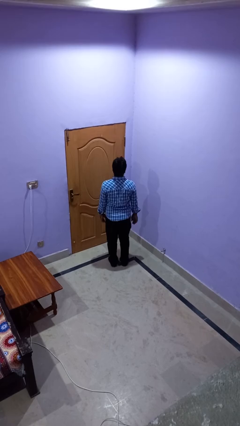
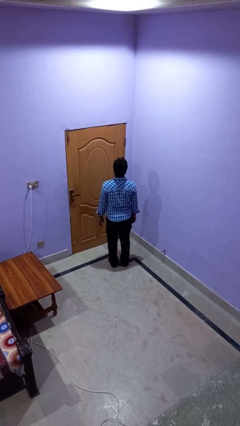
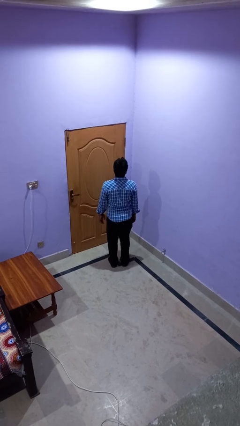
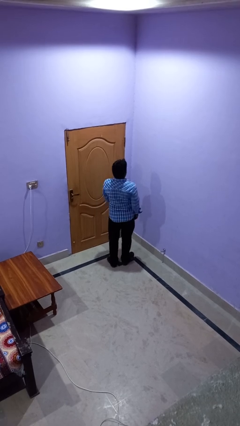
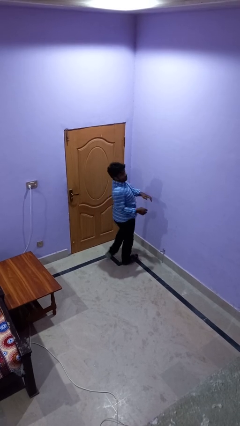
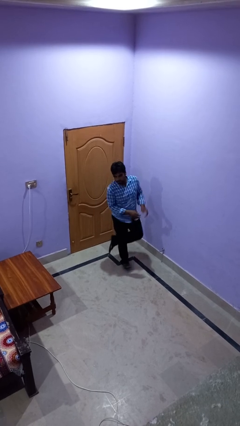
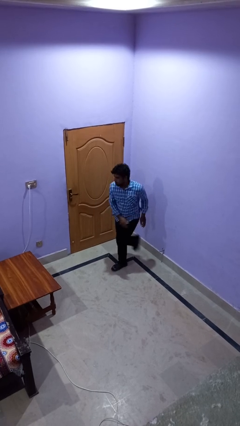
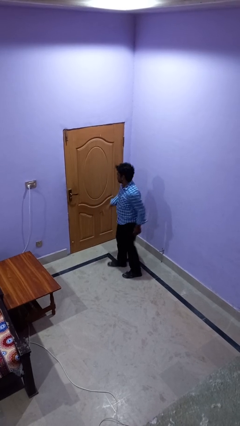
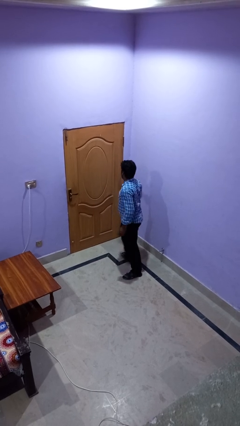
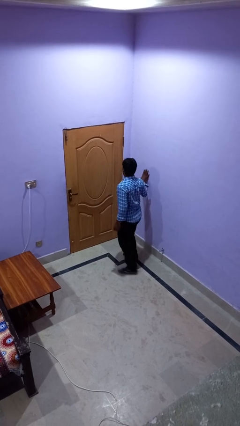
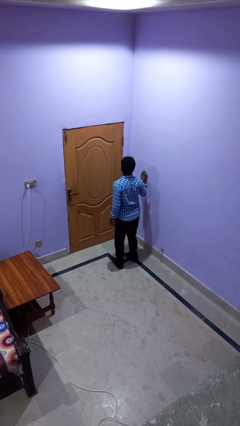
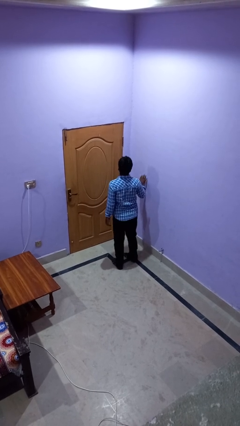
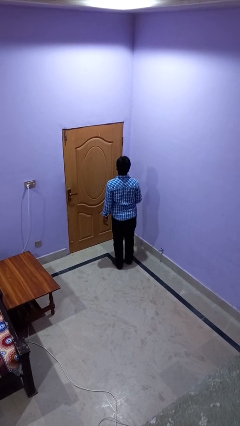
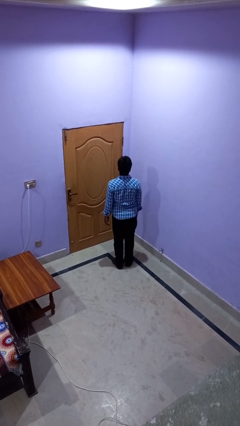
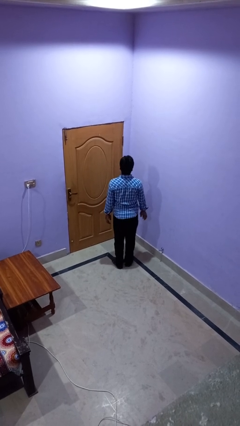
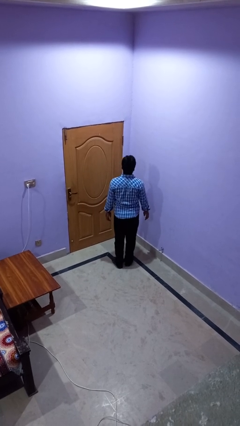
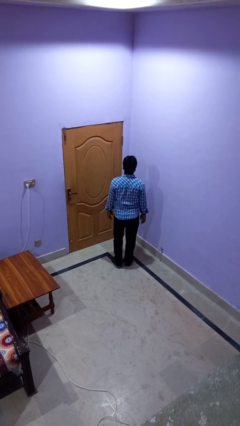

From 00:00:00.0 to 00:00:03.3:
person twirls

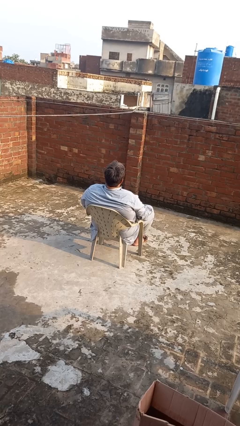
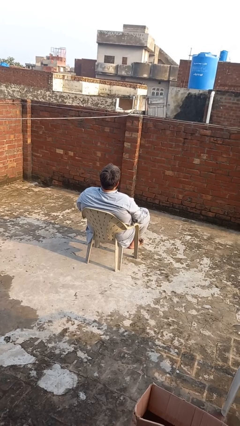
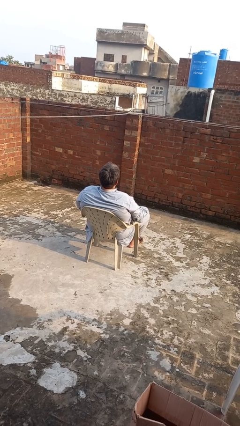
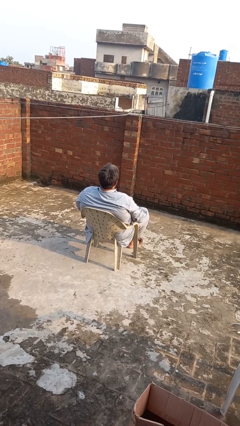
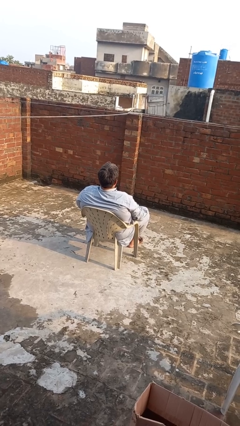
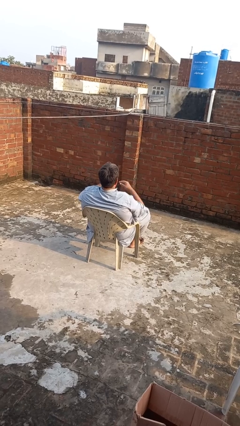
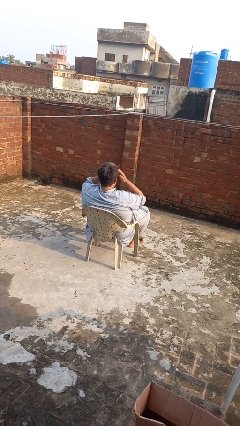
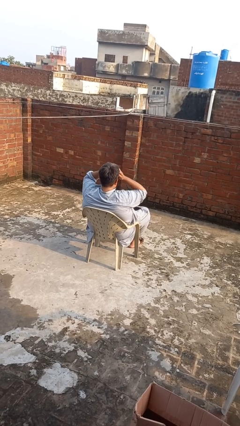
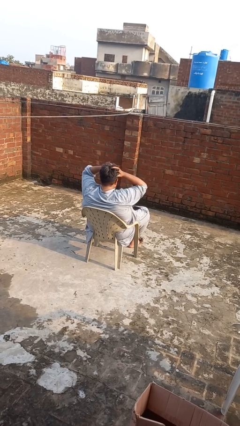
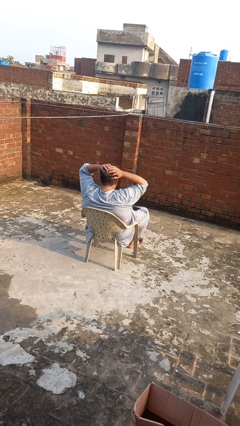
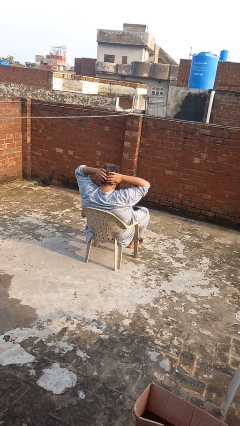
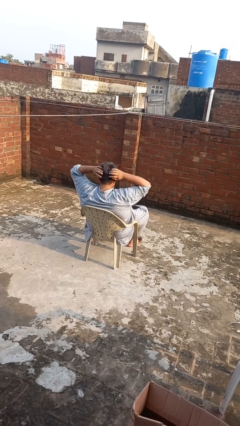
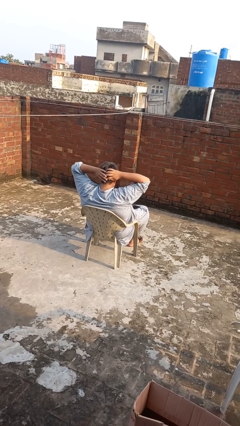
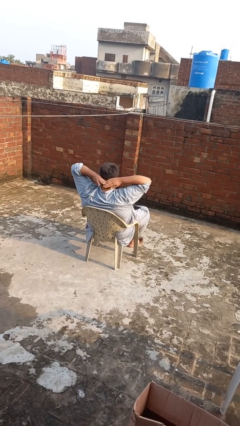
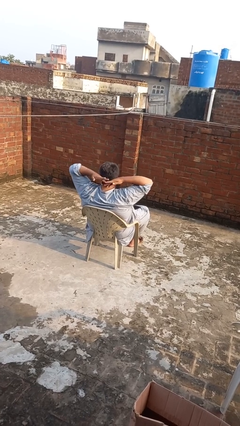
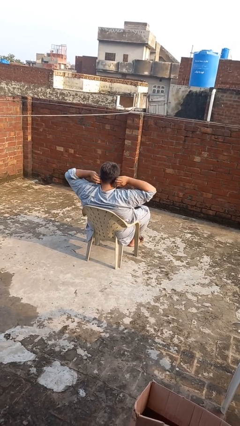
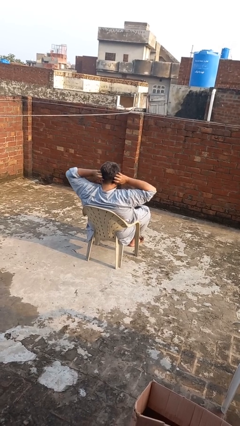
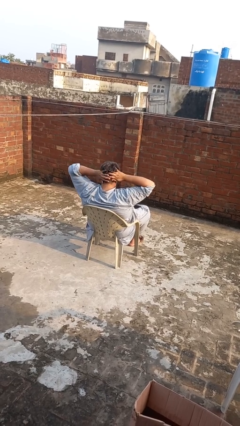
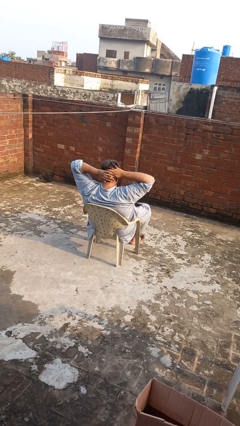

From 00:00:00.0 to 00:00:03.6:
person strokes hair

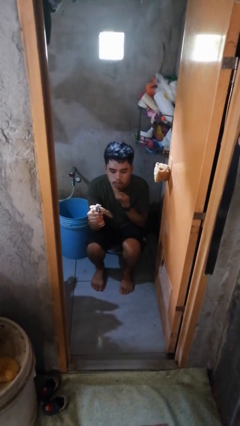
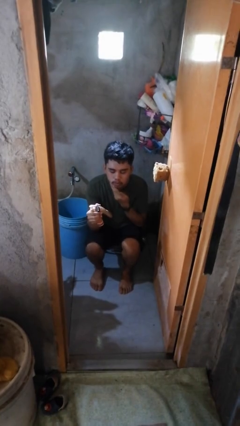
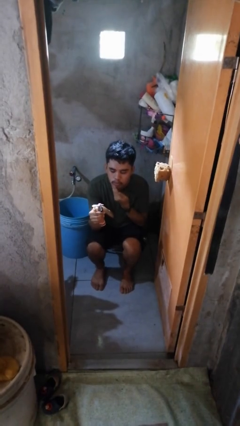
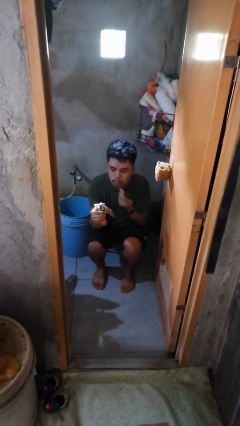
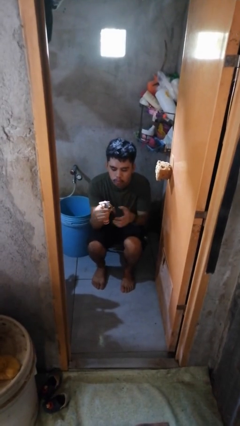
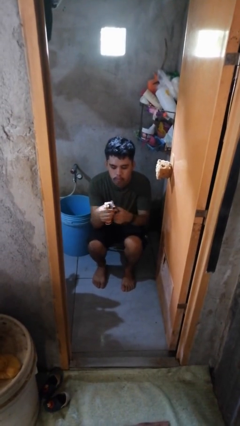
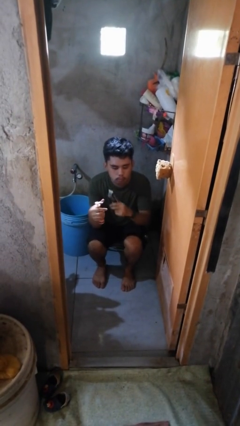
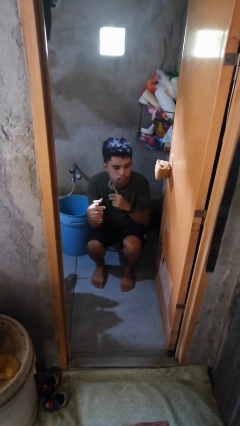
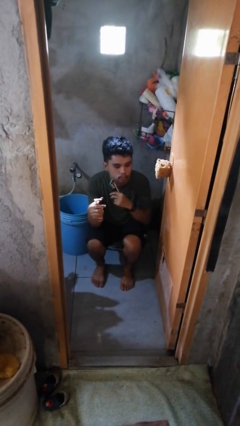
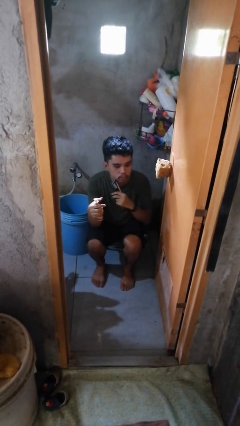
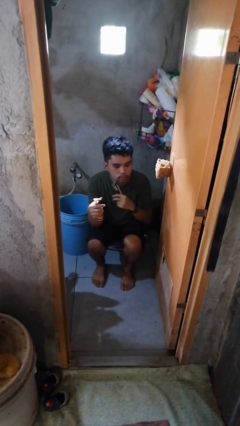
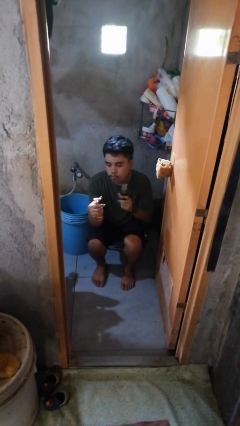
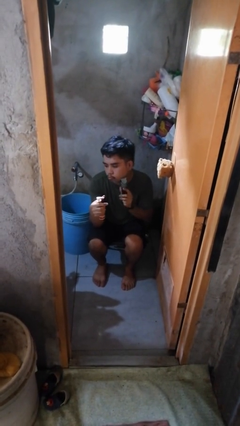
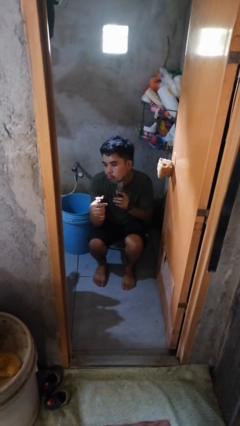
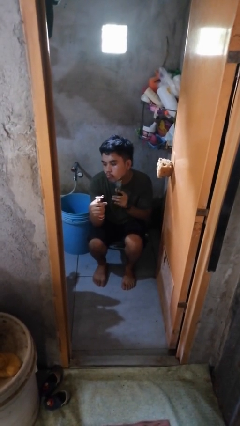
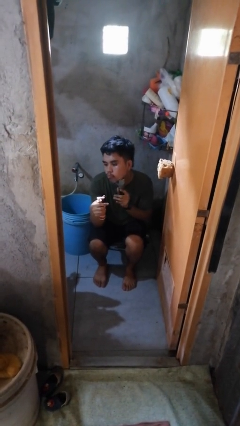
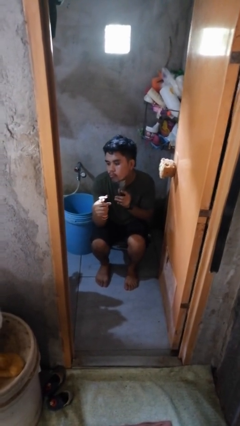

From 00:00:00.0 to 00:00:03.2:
person shaves face

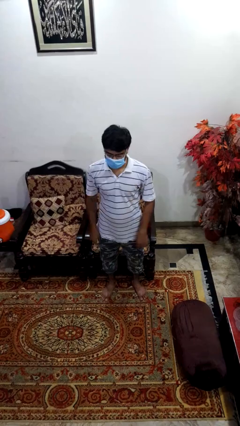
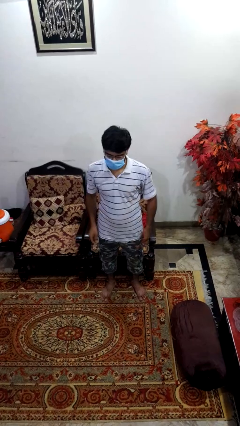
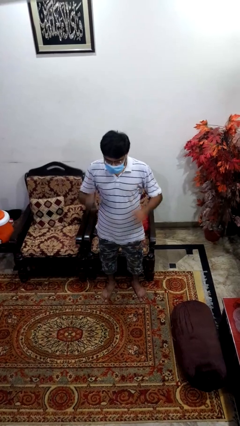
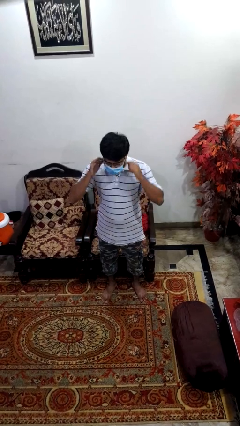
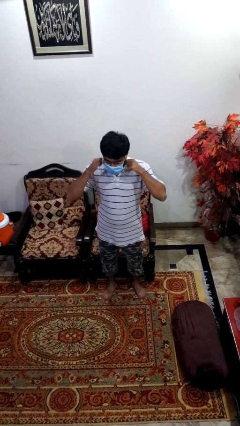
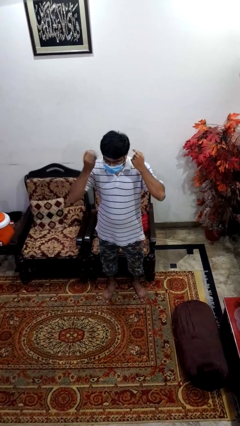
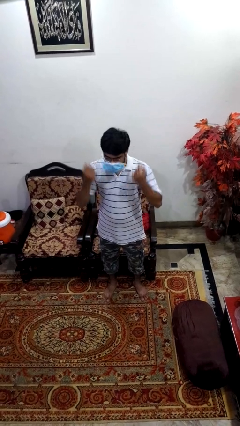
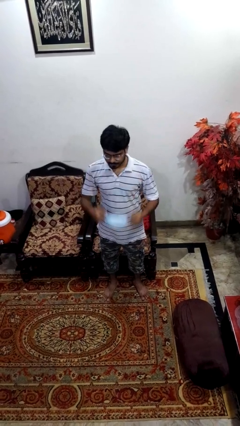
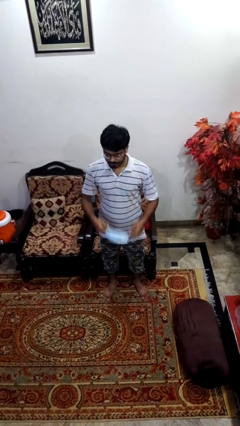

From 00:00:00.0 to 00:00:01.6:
person takes off facemask

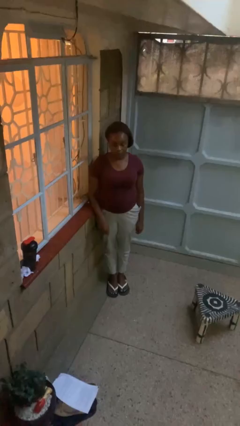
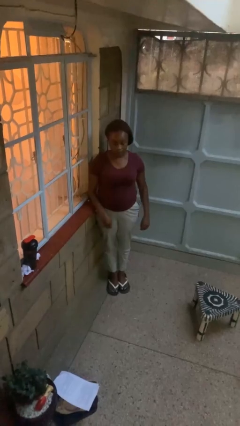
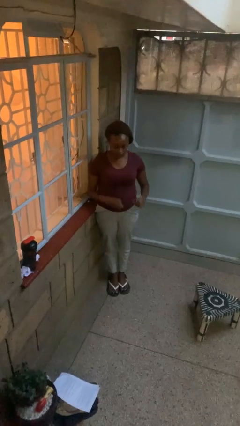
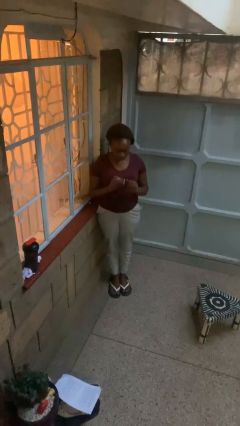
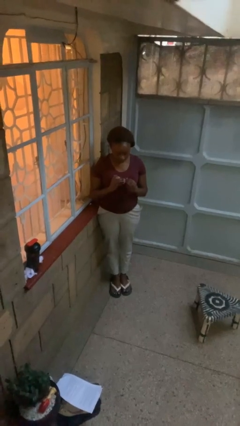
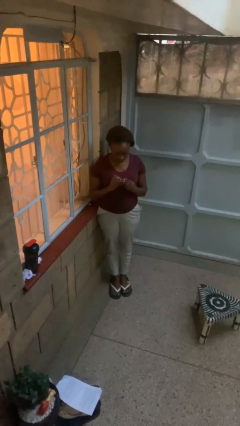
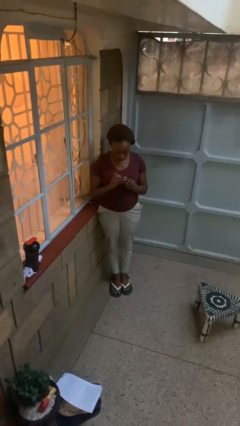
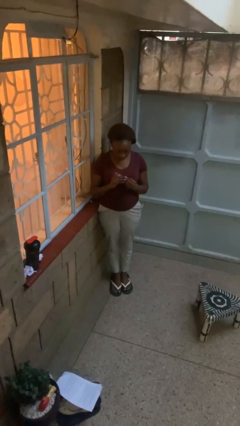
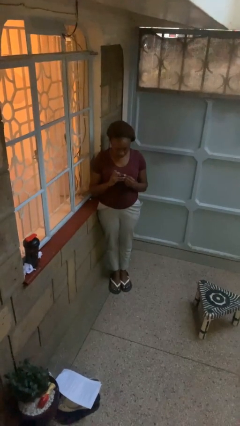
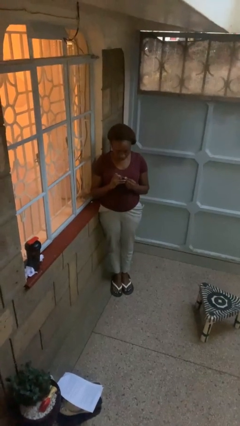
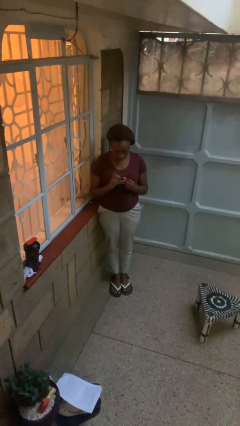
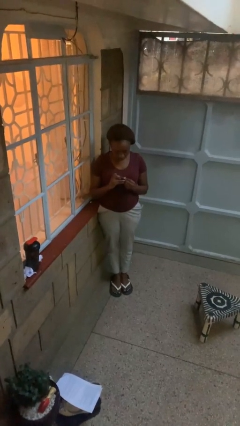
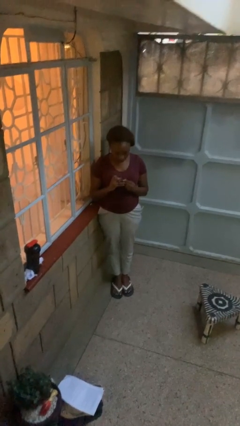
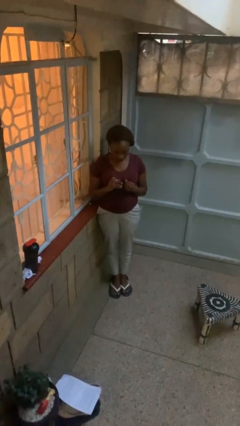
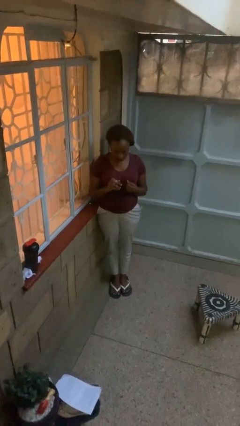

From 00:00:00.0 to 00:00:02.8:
person clips fingernails

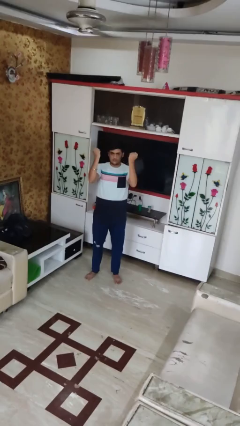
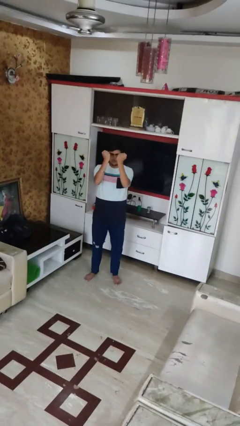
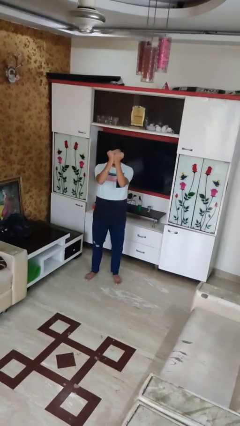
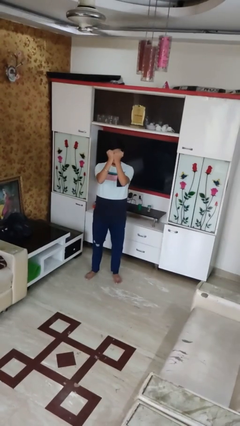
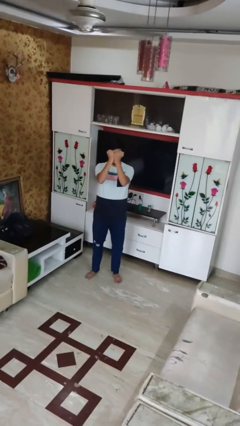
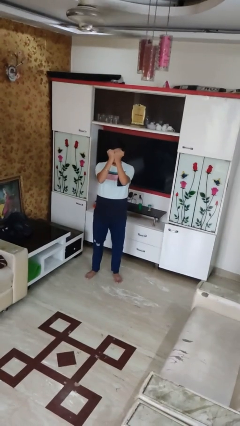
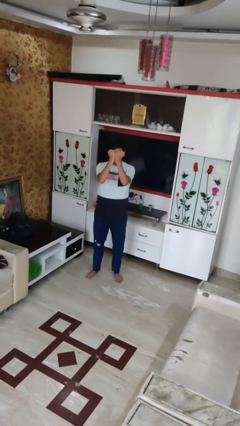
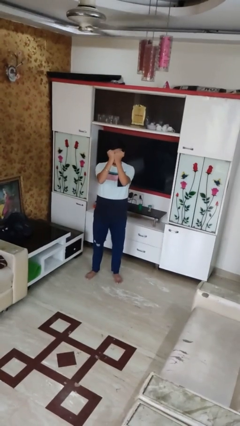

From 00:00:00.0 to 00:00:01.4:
person gestures zoom out

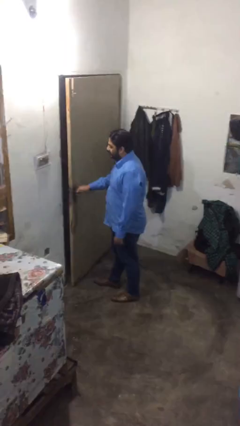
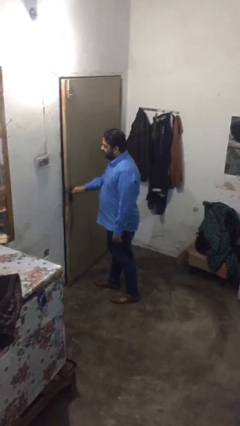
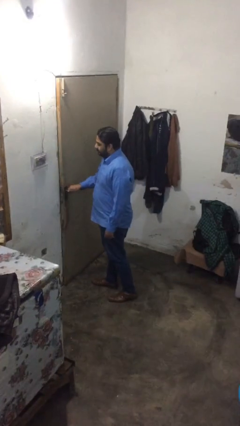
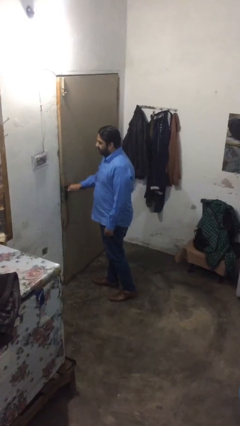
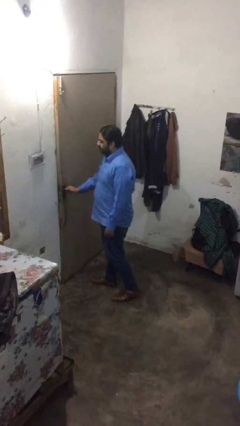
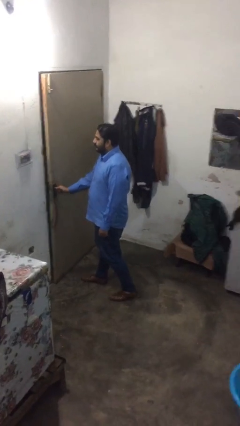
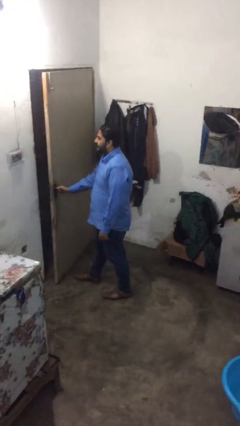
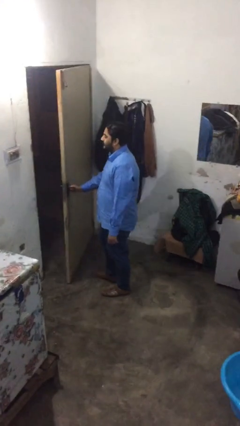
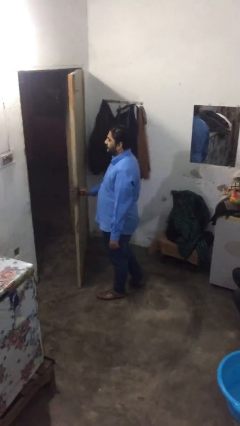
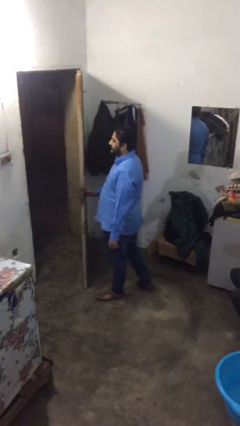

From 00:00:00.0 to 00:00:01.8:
person opens facility door
